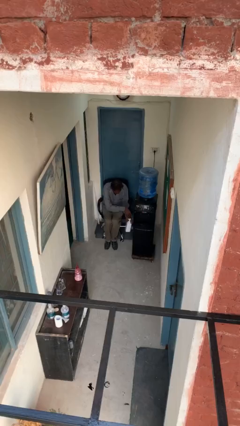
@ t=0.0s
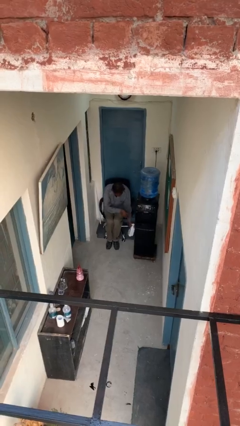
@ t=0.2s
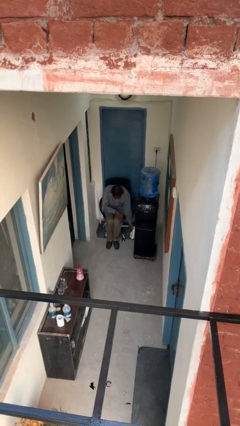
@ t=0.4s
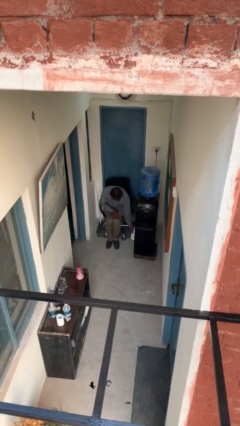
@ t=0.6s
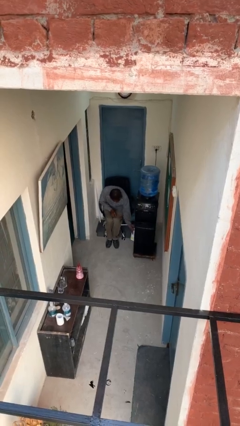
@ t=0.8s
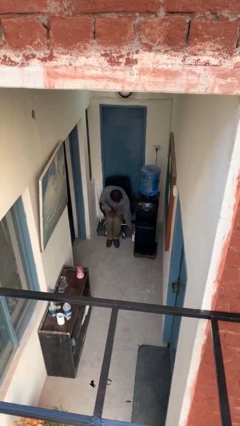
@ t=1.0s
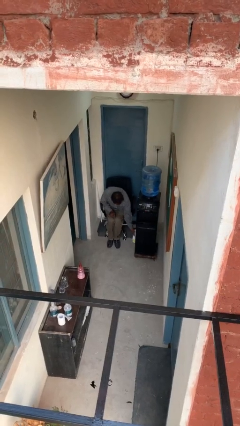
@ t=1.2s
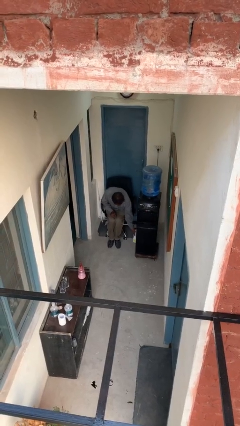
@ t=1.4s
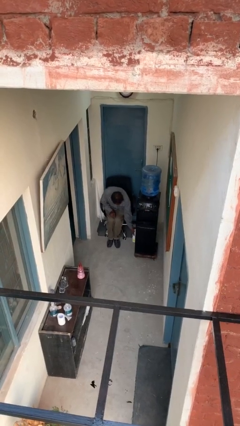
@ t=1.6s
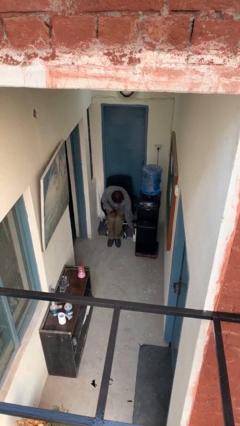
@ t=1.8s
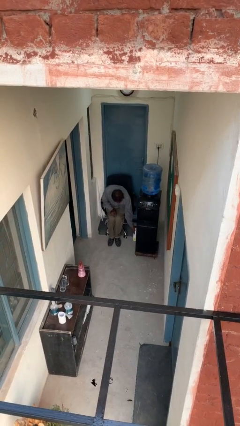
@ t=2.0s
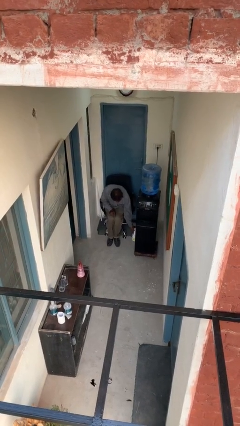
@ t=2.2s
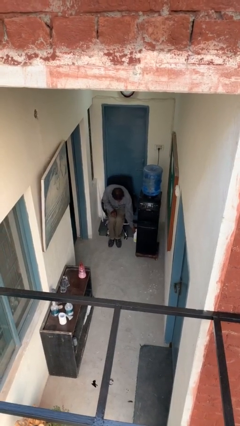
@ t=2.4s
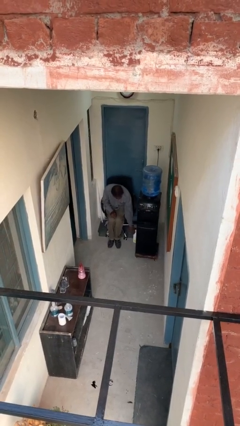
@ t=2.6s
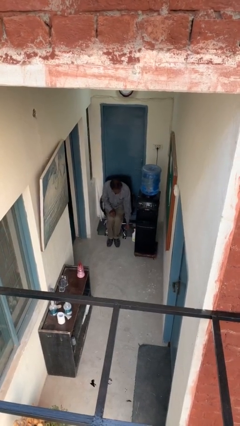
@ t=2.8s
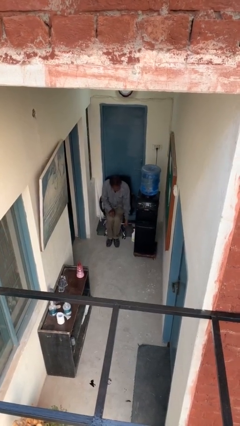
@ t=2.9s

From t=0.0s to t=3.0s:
person puts down object on floor

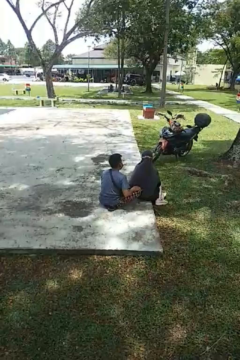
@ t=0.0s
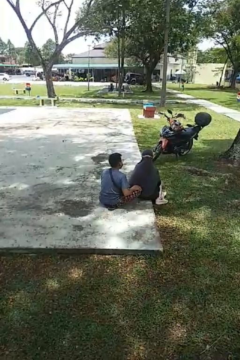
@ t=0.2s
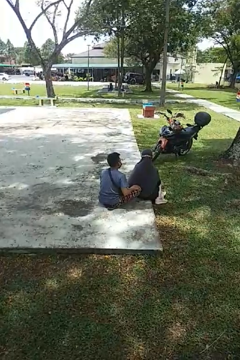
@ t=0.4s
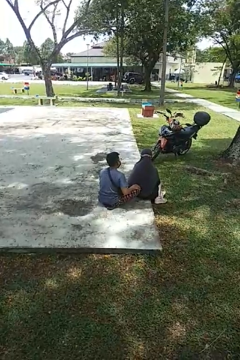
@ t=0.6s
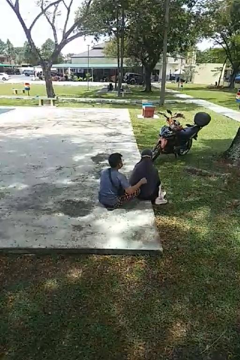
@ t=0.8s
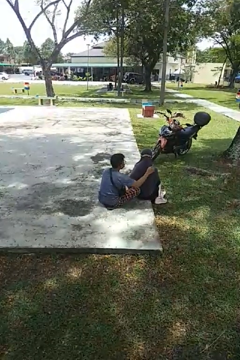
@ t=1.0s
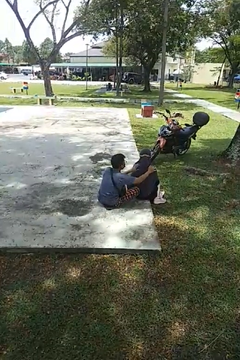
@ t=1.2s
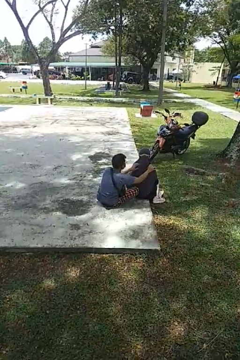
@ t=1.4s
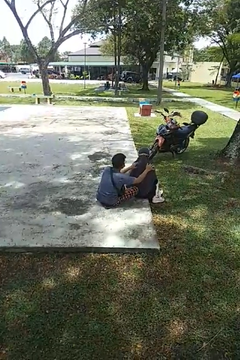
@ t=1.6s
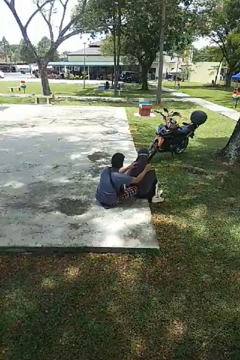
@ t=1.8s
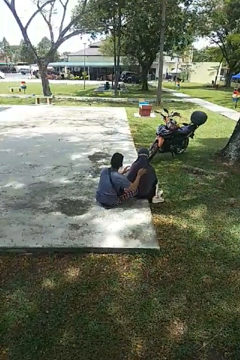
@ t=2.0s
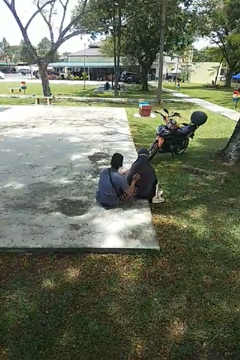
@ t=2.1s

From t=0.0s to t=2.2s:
person pounds shoulders of person

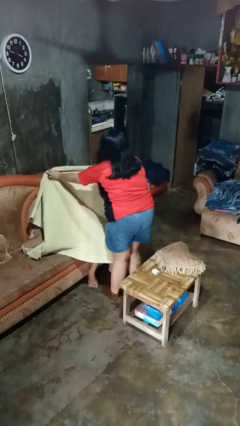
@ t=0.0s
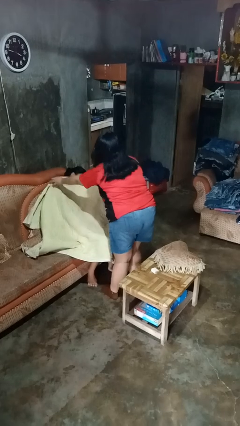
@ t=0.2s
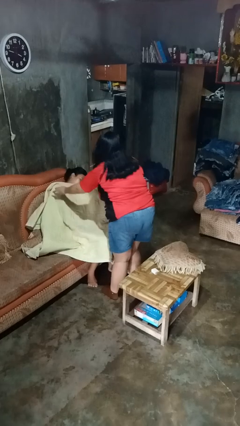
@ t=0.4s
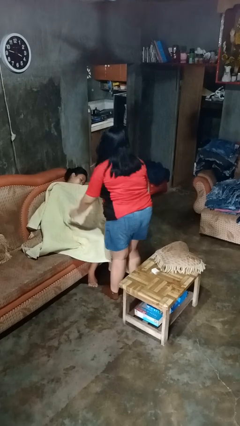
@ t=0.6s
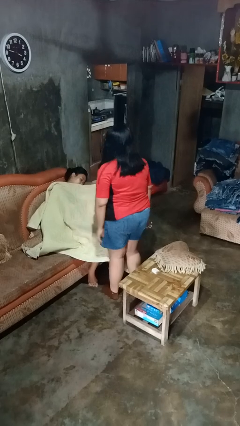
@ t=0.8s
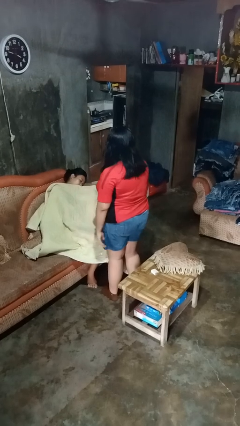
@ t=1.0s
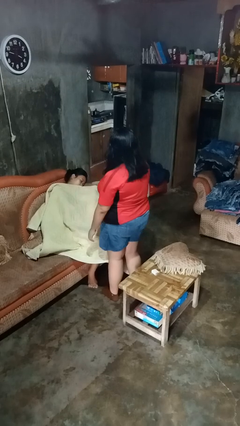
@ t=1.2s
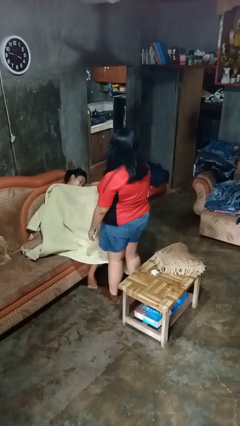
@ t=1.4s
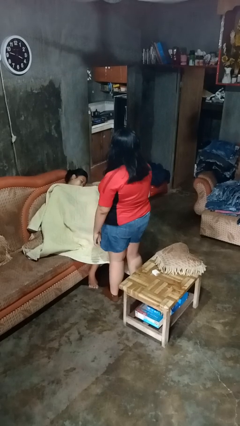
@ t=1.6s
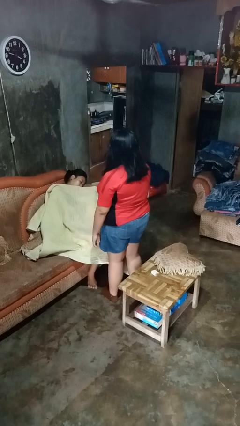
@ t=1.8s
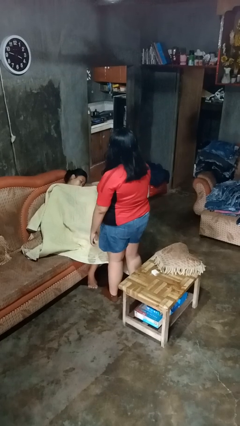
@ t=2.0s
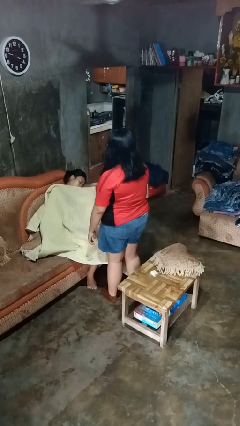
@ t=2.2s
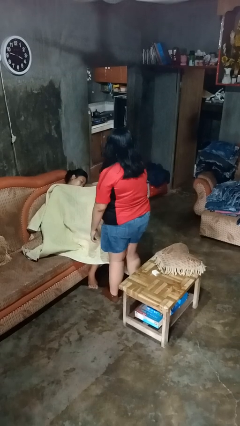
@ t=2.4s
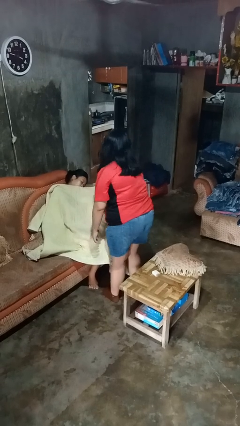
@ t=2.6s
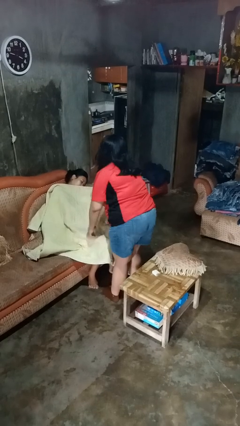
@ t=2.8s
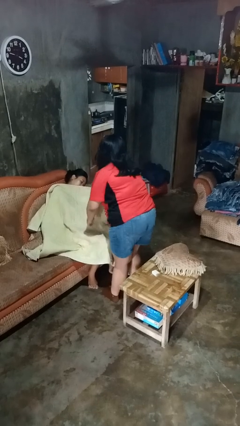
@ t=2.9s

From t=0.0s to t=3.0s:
person covers friend with blanket

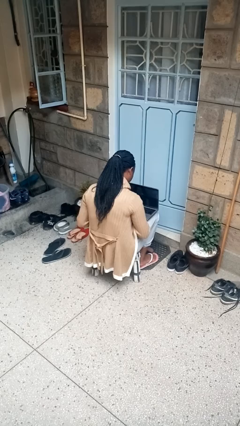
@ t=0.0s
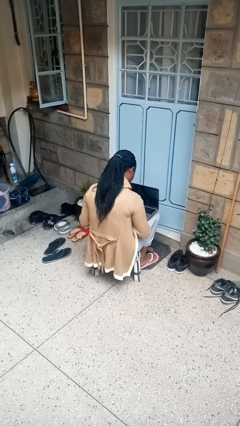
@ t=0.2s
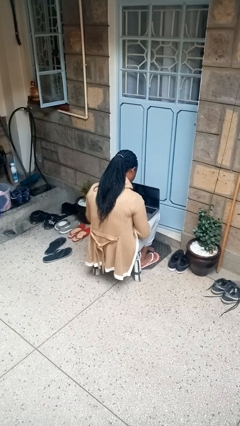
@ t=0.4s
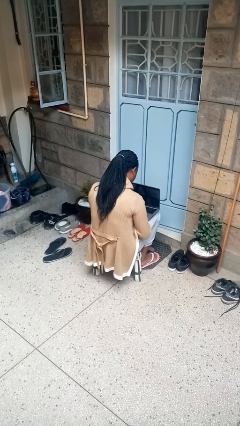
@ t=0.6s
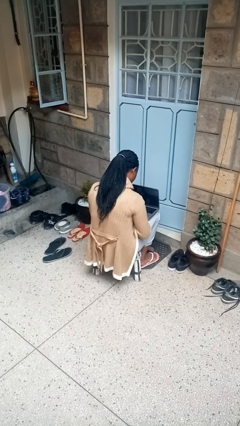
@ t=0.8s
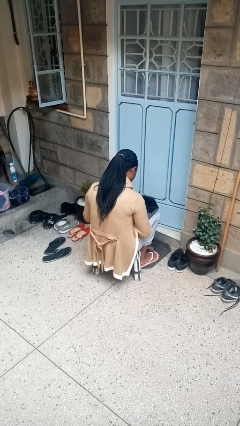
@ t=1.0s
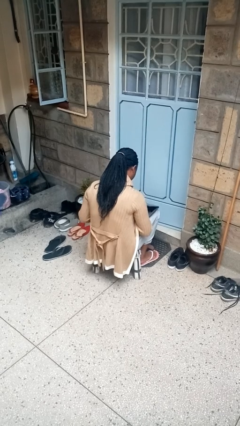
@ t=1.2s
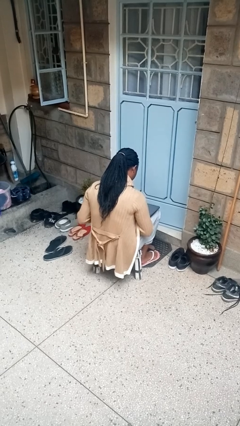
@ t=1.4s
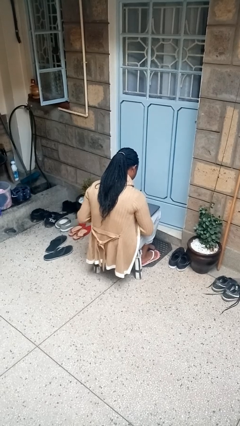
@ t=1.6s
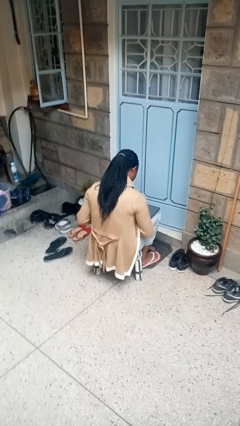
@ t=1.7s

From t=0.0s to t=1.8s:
person closes laptop

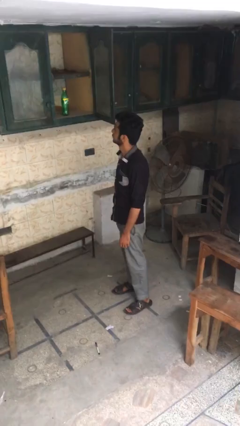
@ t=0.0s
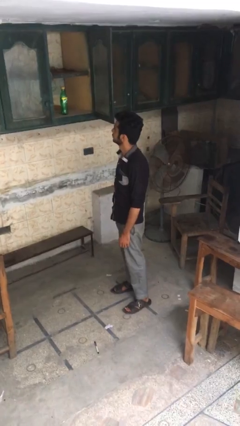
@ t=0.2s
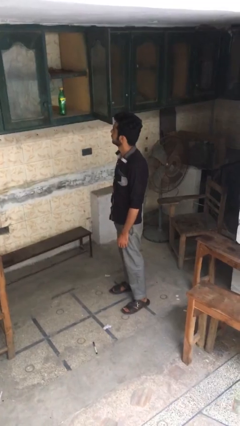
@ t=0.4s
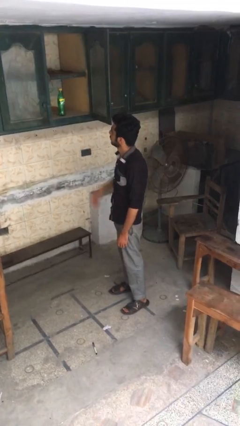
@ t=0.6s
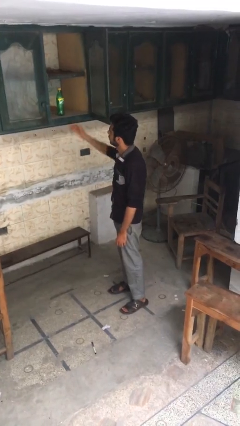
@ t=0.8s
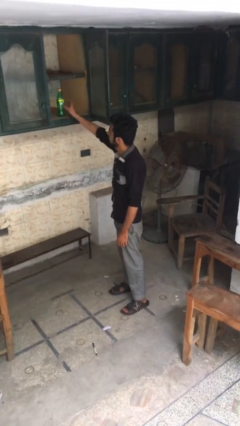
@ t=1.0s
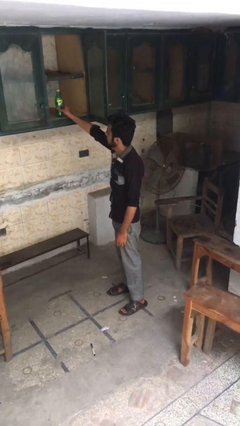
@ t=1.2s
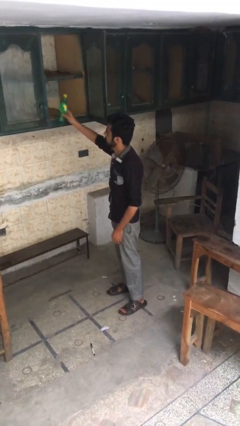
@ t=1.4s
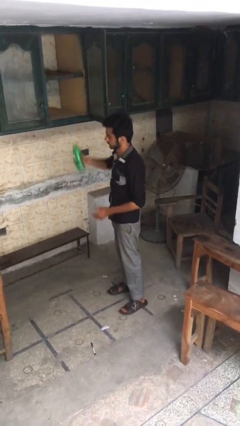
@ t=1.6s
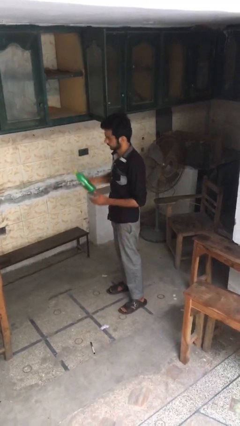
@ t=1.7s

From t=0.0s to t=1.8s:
person takes object from cabinet

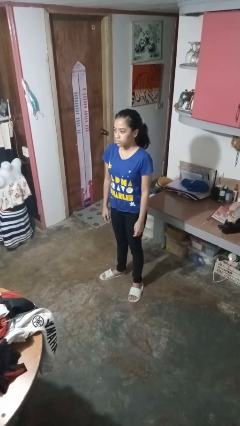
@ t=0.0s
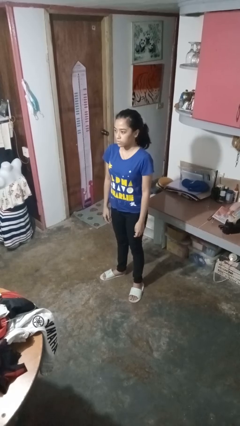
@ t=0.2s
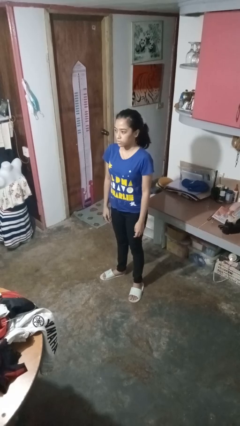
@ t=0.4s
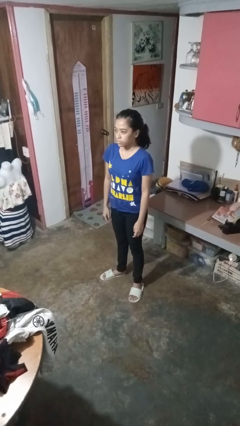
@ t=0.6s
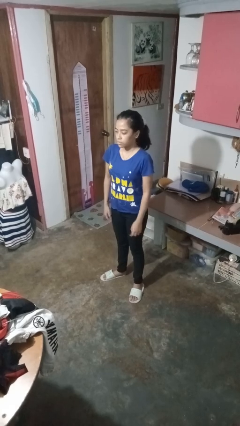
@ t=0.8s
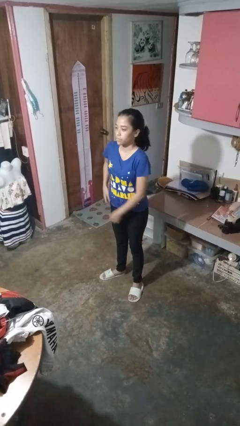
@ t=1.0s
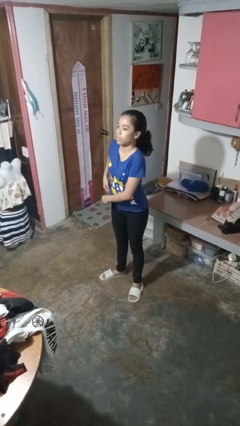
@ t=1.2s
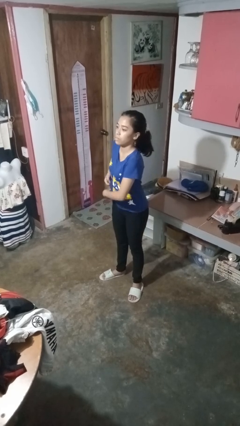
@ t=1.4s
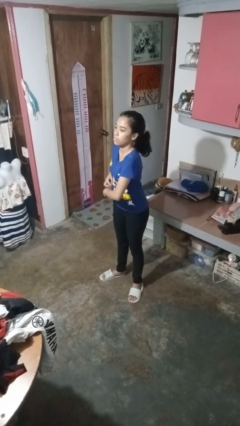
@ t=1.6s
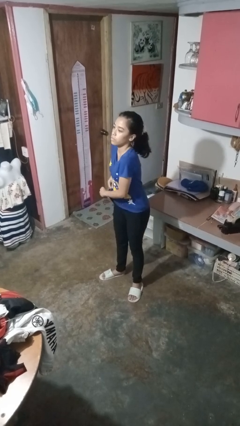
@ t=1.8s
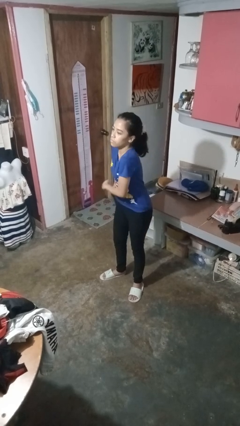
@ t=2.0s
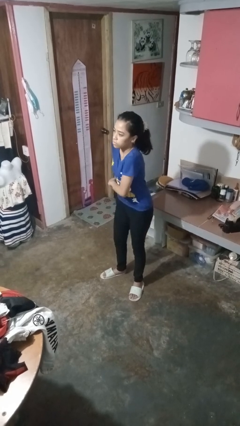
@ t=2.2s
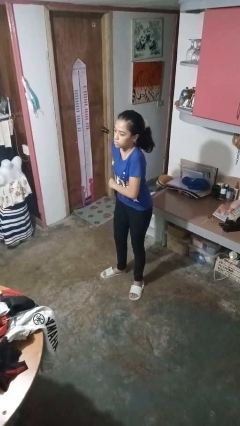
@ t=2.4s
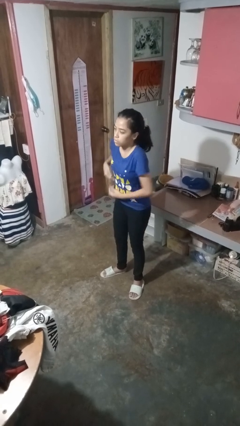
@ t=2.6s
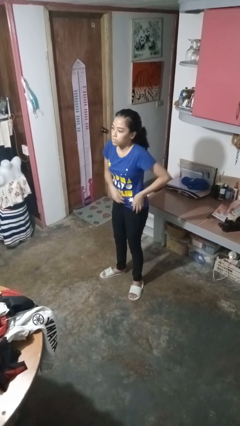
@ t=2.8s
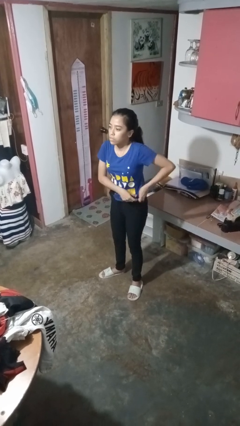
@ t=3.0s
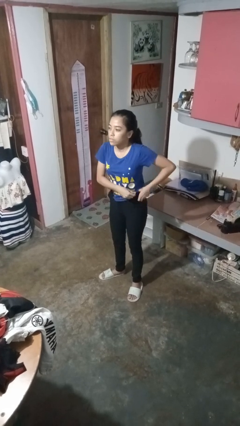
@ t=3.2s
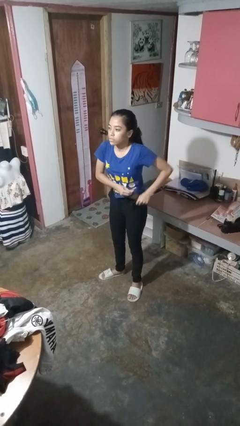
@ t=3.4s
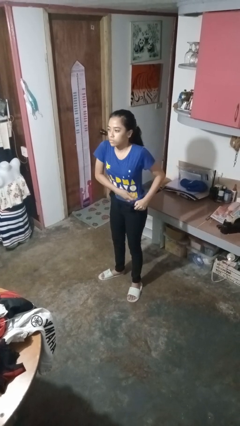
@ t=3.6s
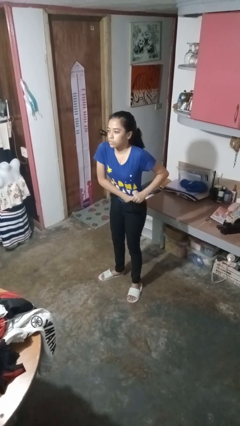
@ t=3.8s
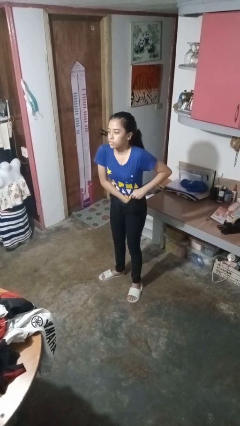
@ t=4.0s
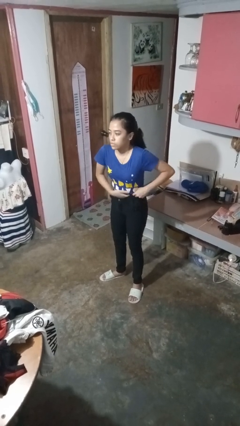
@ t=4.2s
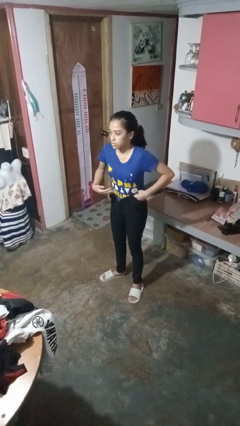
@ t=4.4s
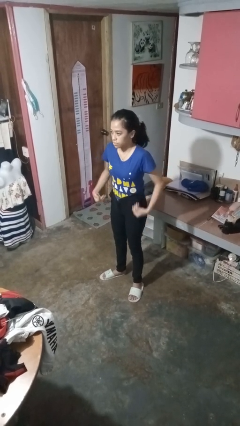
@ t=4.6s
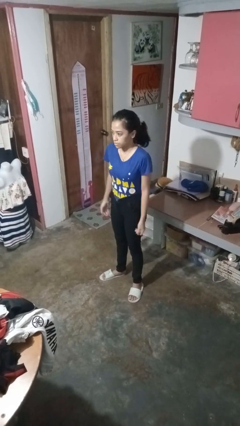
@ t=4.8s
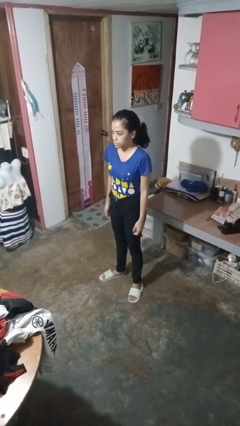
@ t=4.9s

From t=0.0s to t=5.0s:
person tucks in shirt

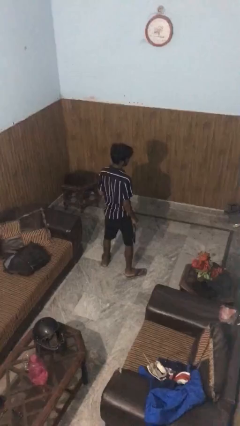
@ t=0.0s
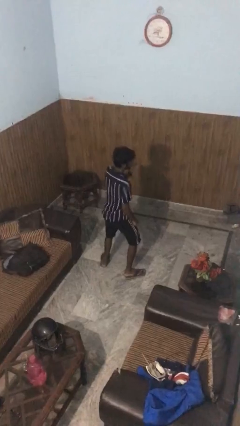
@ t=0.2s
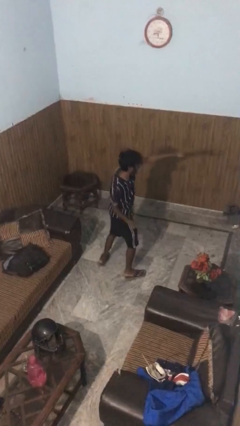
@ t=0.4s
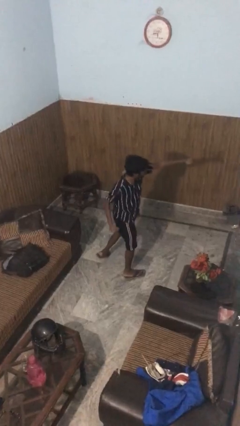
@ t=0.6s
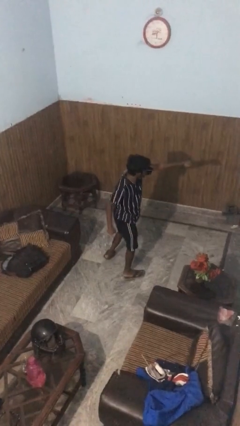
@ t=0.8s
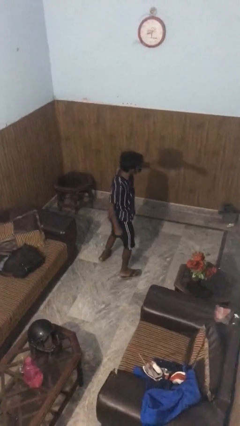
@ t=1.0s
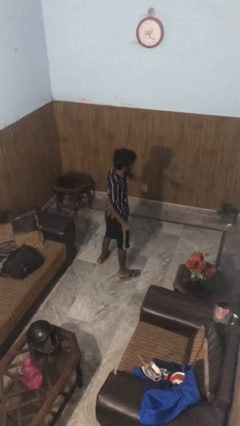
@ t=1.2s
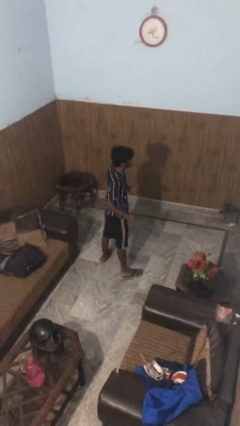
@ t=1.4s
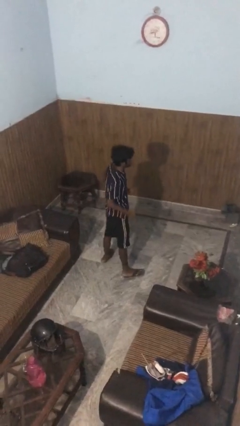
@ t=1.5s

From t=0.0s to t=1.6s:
person punches
